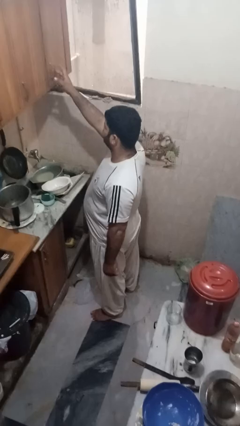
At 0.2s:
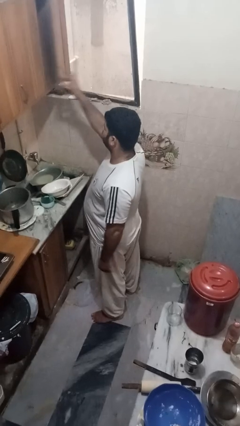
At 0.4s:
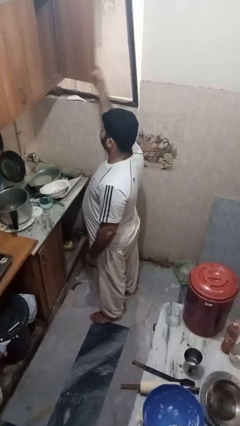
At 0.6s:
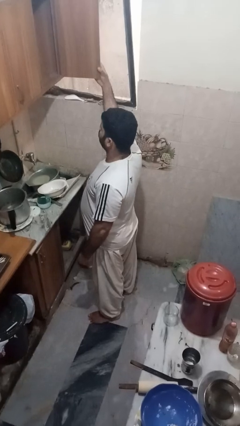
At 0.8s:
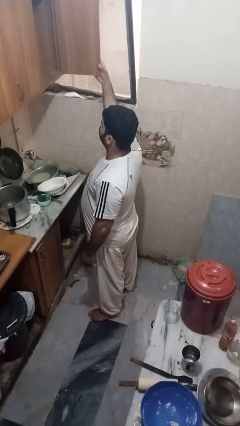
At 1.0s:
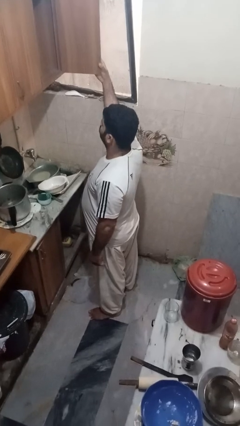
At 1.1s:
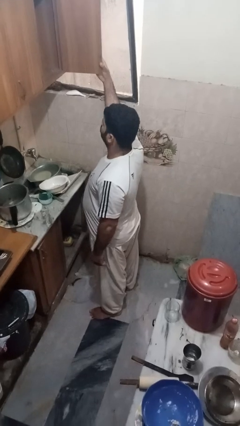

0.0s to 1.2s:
person opens cabinet

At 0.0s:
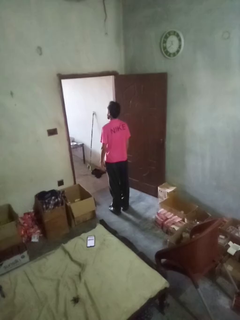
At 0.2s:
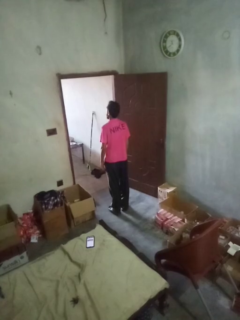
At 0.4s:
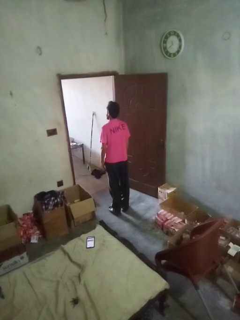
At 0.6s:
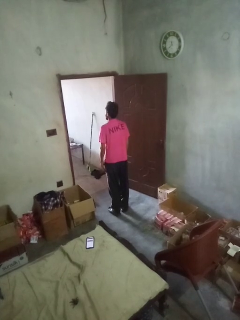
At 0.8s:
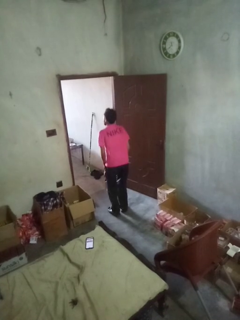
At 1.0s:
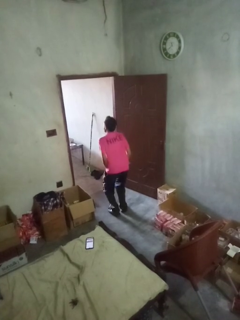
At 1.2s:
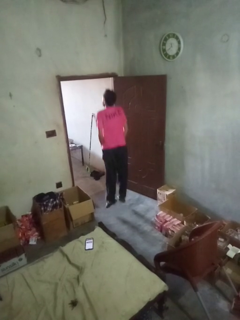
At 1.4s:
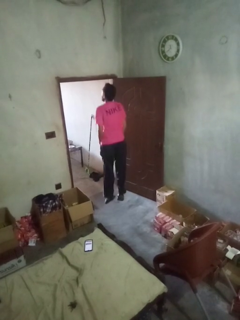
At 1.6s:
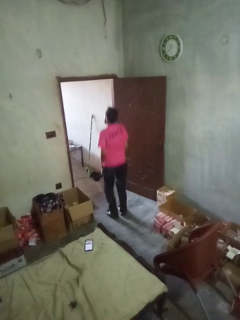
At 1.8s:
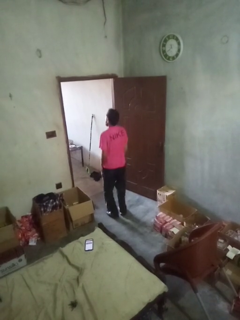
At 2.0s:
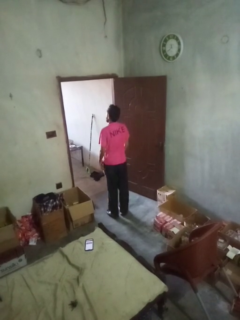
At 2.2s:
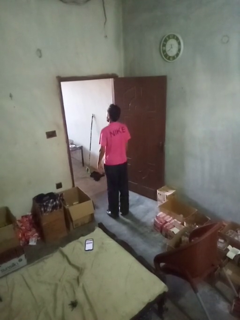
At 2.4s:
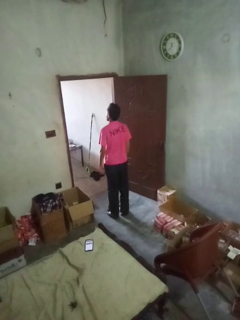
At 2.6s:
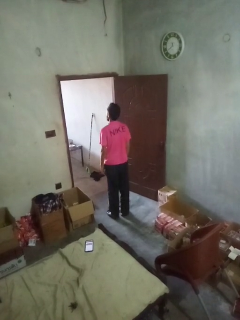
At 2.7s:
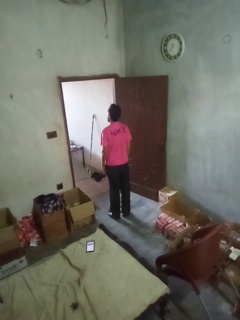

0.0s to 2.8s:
person jumps

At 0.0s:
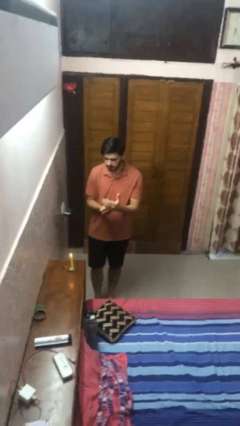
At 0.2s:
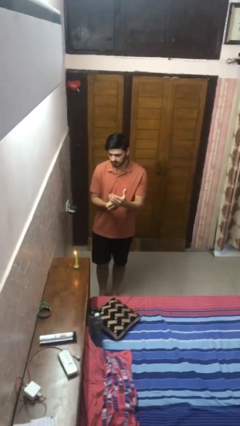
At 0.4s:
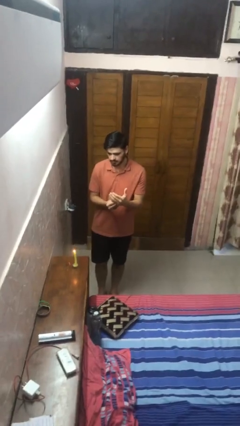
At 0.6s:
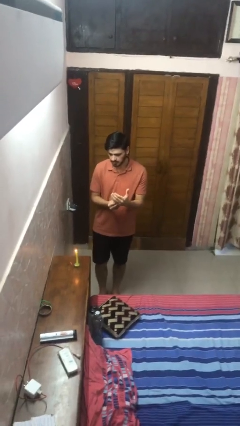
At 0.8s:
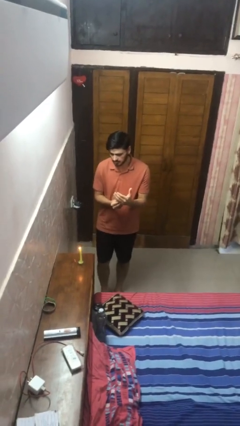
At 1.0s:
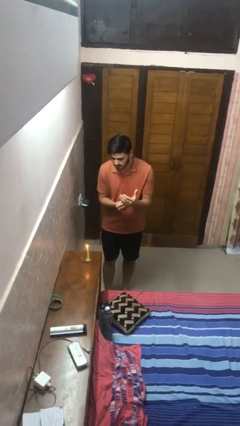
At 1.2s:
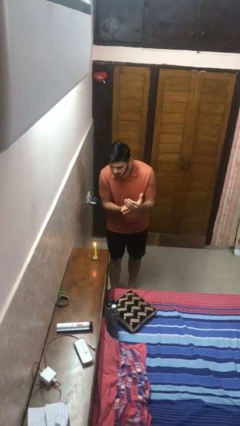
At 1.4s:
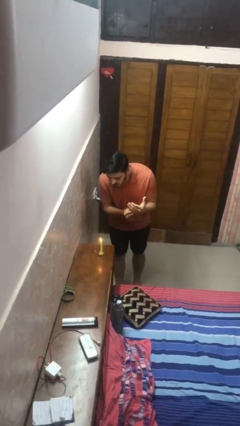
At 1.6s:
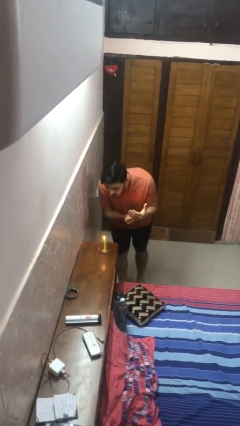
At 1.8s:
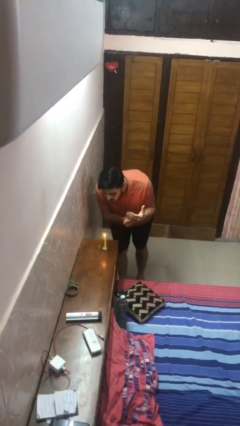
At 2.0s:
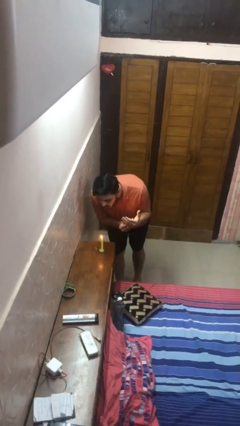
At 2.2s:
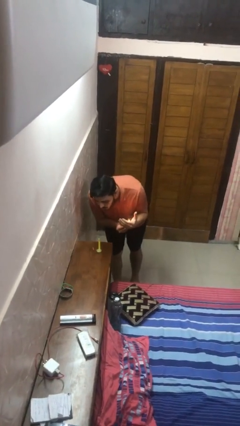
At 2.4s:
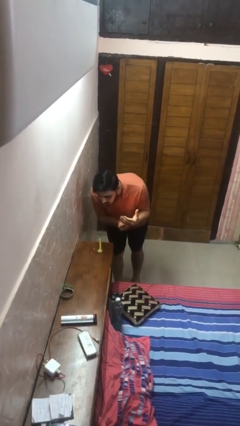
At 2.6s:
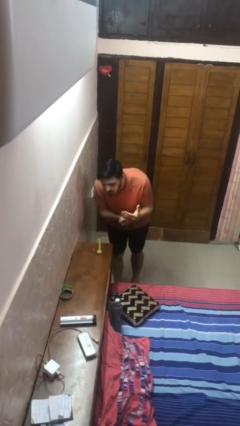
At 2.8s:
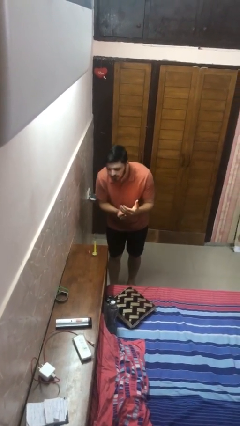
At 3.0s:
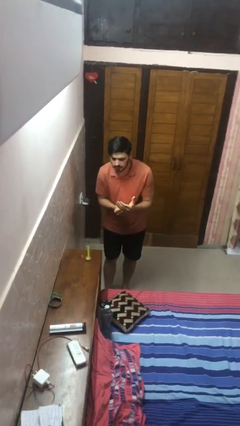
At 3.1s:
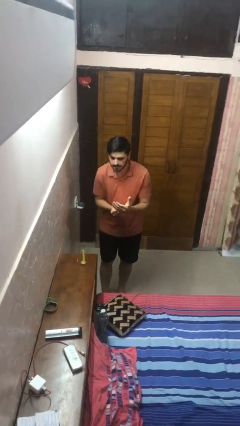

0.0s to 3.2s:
person extinguishes candle

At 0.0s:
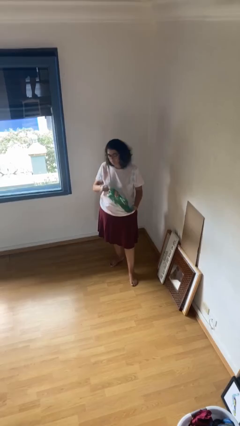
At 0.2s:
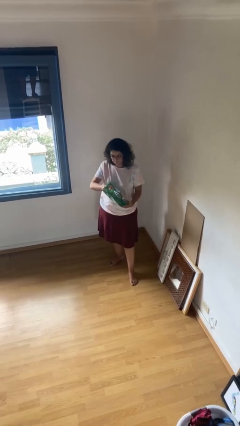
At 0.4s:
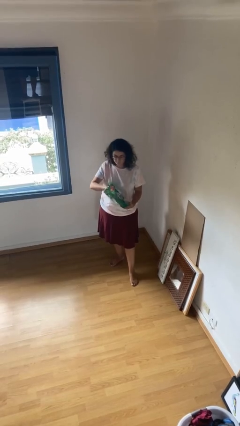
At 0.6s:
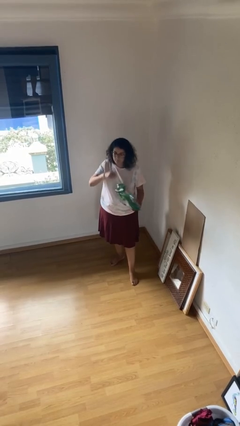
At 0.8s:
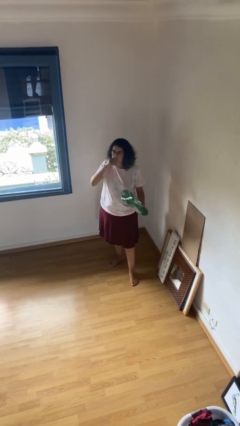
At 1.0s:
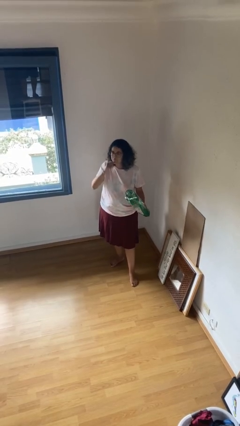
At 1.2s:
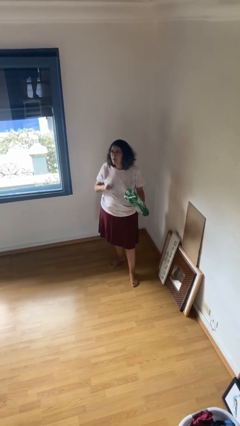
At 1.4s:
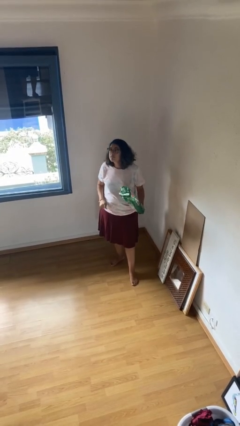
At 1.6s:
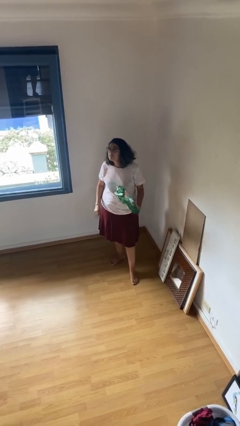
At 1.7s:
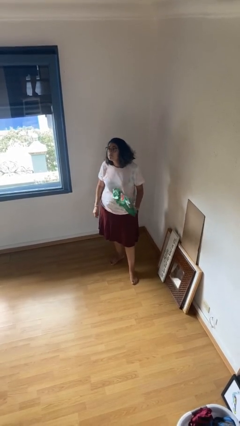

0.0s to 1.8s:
person eats snack from bag

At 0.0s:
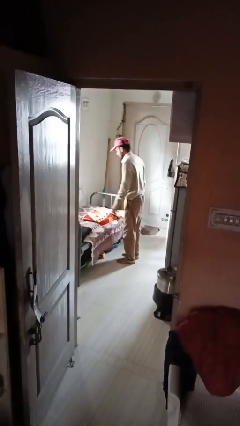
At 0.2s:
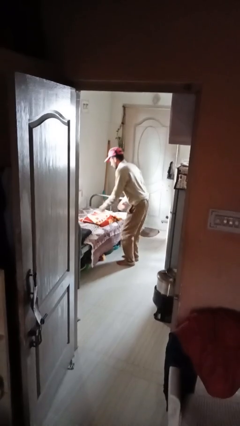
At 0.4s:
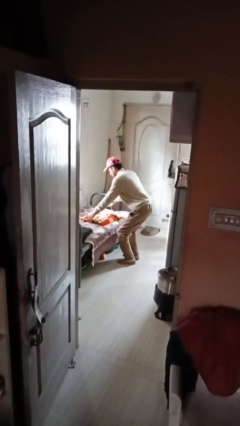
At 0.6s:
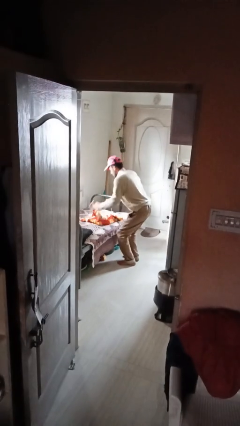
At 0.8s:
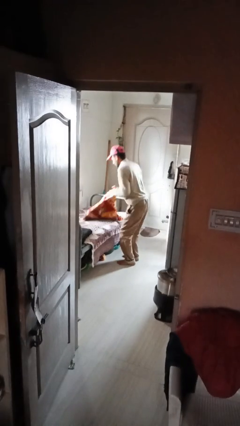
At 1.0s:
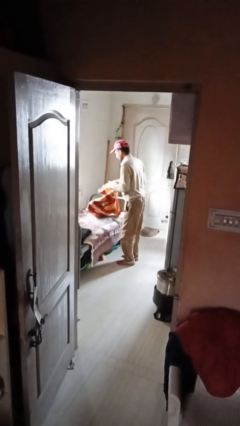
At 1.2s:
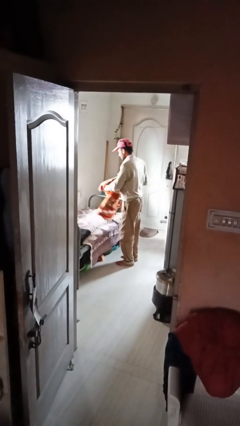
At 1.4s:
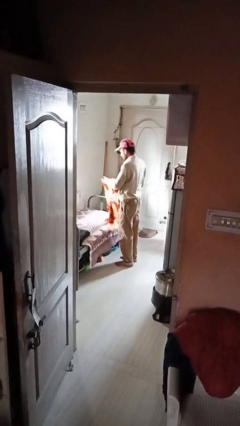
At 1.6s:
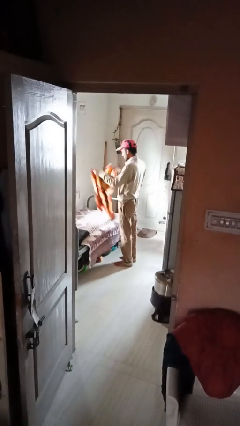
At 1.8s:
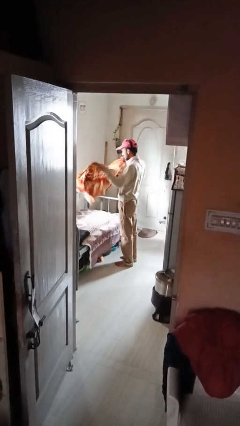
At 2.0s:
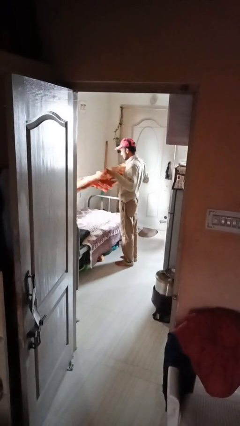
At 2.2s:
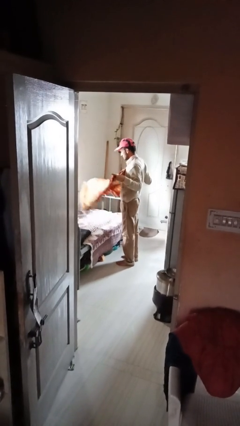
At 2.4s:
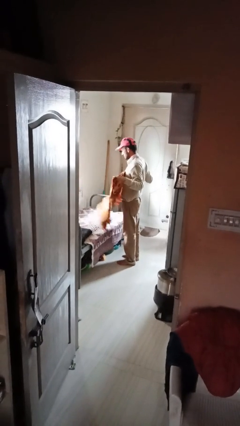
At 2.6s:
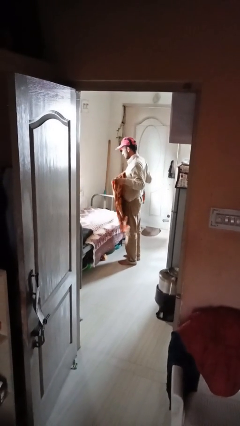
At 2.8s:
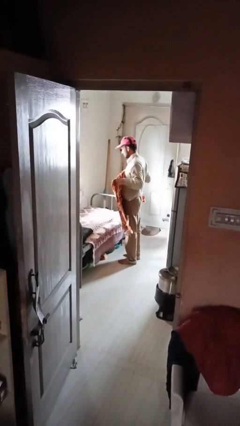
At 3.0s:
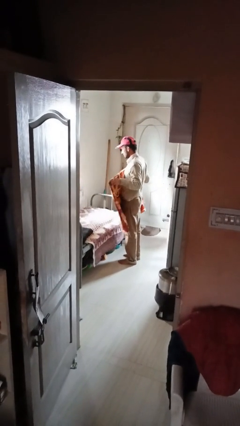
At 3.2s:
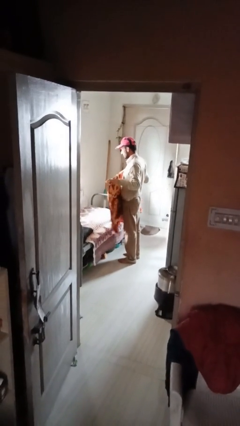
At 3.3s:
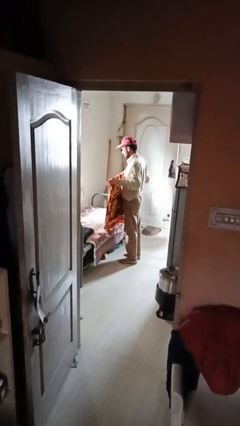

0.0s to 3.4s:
person unfolds blanket

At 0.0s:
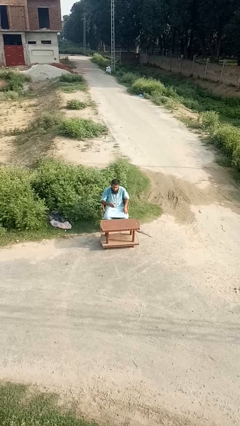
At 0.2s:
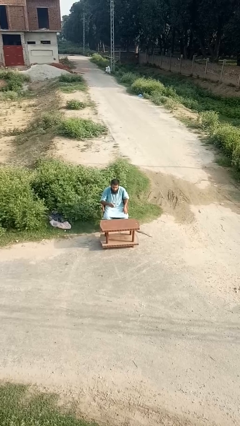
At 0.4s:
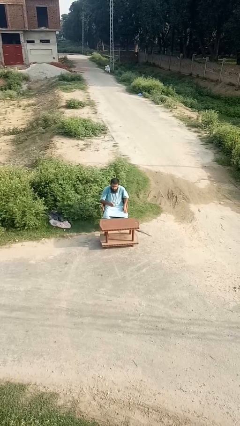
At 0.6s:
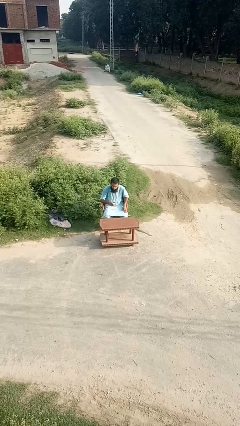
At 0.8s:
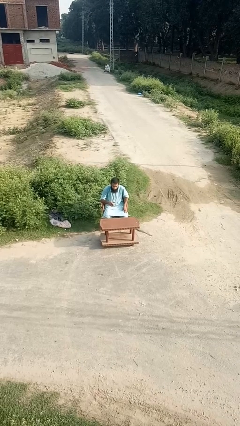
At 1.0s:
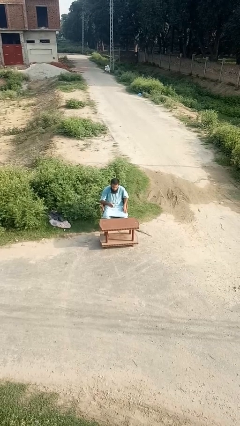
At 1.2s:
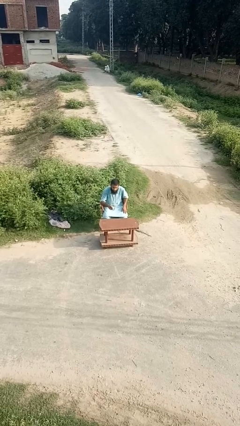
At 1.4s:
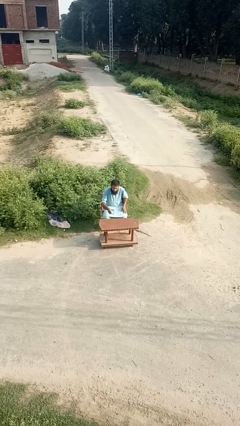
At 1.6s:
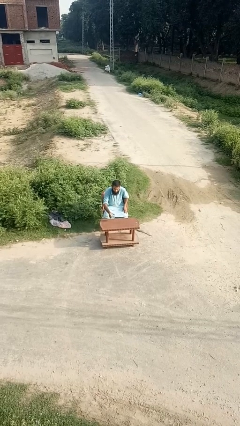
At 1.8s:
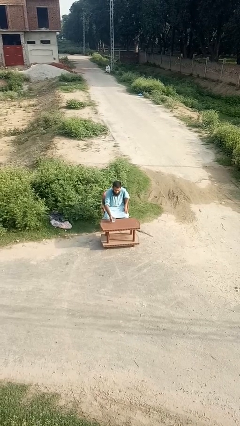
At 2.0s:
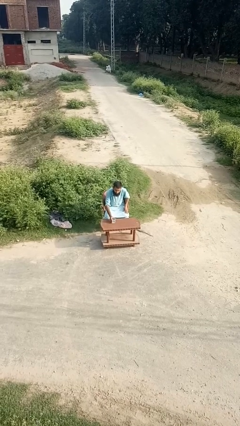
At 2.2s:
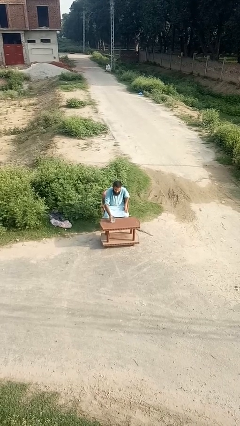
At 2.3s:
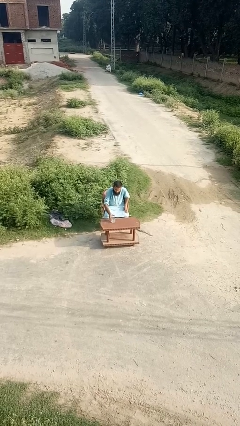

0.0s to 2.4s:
person puts down object on table

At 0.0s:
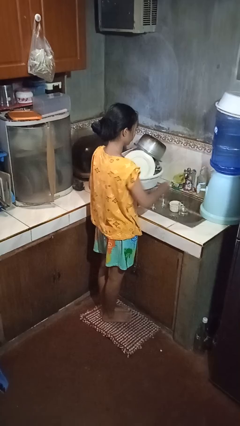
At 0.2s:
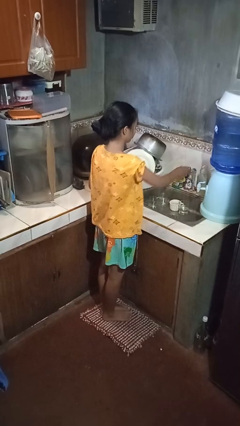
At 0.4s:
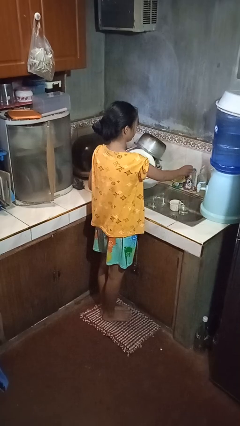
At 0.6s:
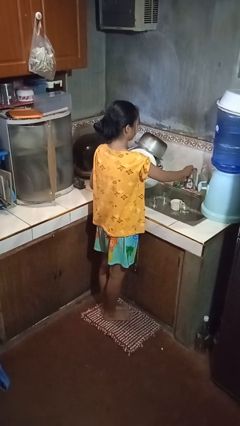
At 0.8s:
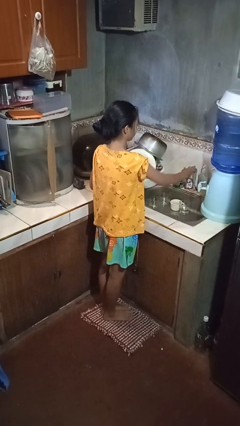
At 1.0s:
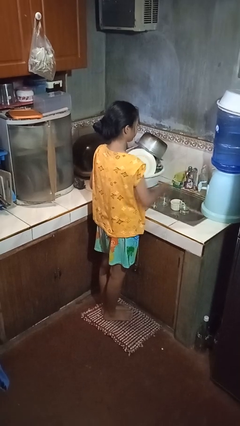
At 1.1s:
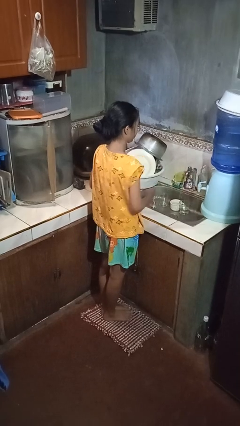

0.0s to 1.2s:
person turns on faucet

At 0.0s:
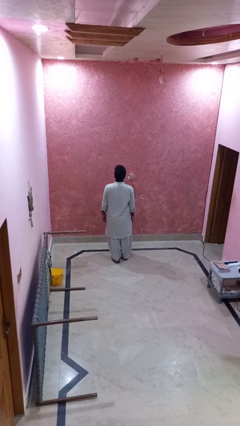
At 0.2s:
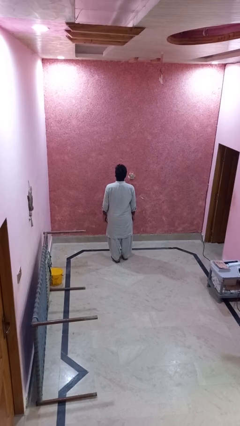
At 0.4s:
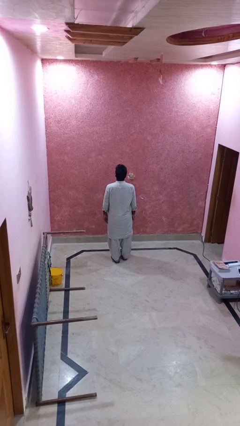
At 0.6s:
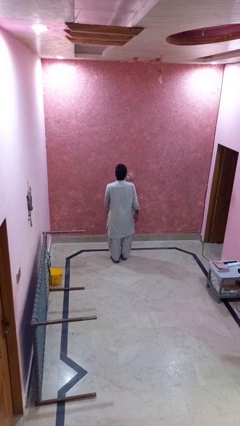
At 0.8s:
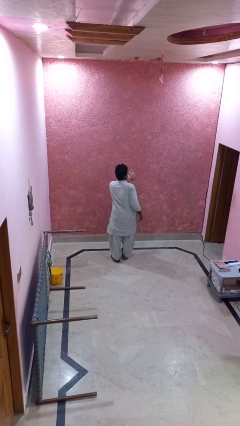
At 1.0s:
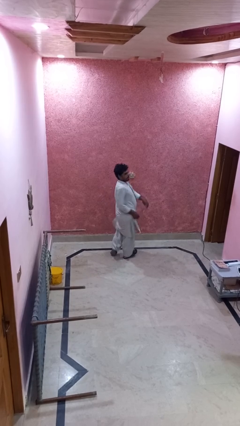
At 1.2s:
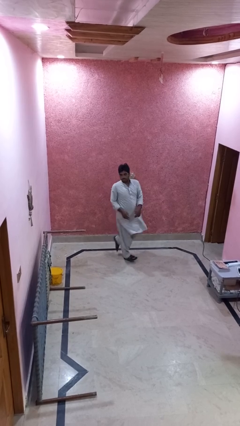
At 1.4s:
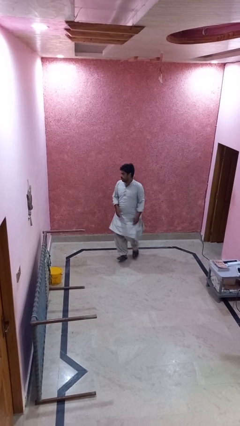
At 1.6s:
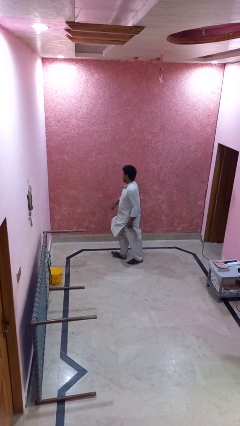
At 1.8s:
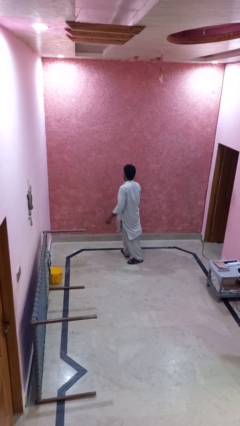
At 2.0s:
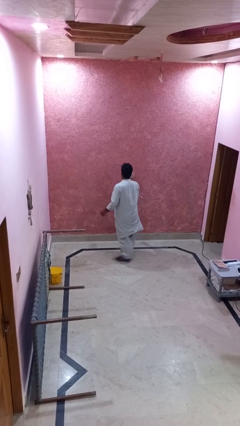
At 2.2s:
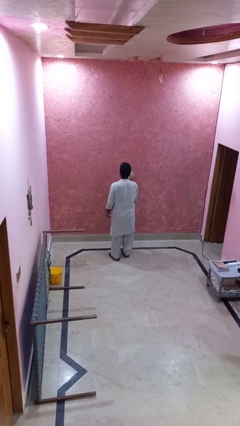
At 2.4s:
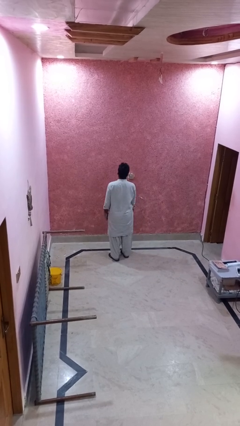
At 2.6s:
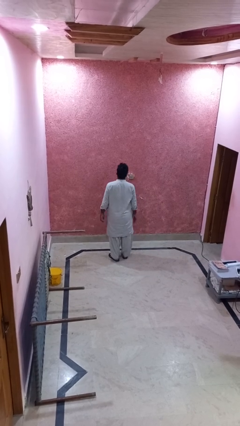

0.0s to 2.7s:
person twirls
